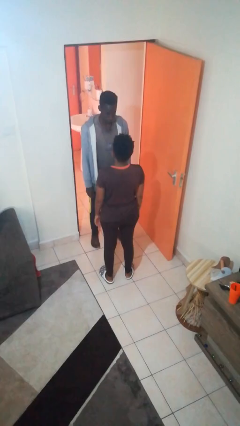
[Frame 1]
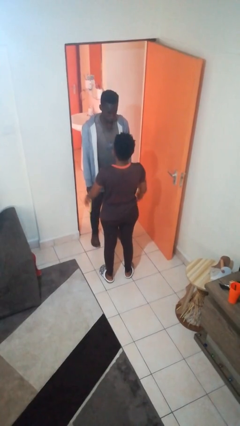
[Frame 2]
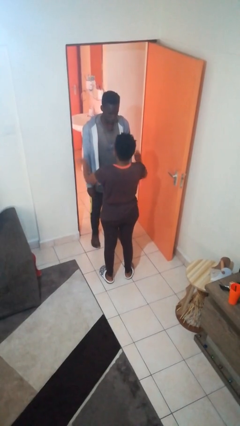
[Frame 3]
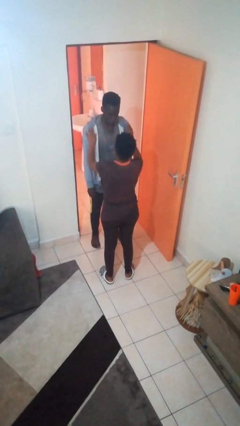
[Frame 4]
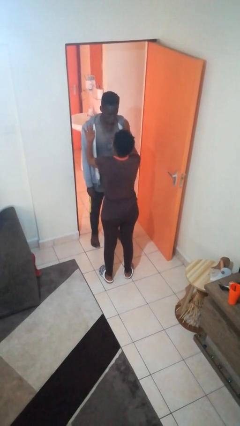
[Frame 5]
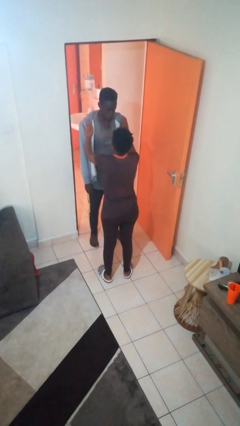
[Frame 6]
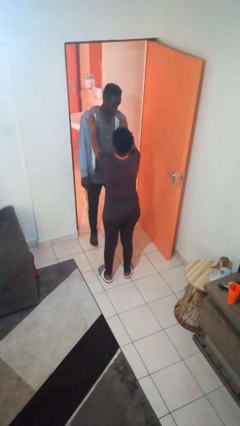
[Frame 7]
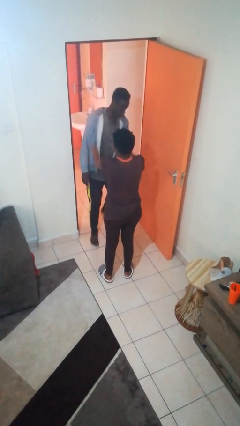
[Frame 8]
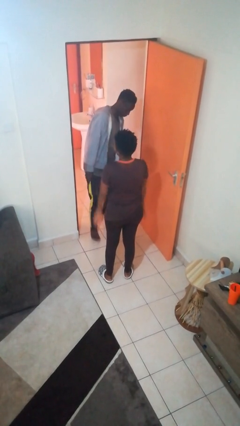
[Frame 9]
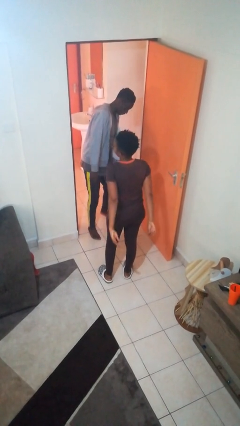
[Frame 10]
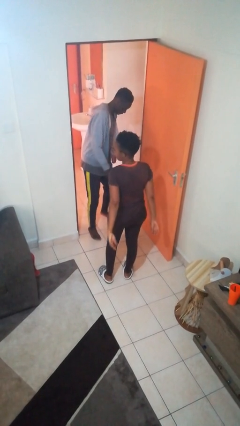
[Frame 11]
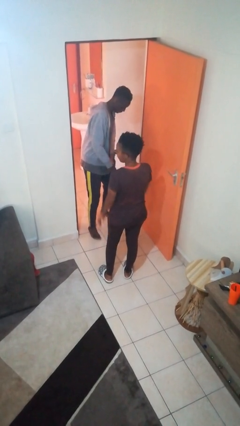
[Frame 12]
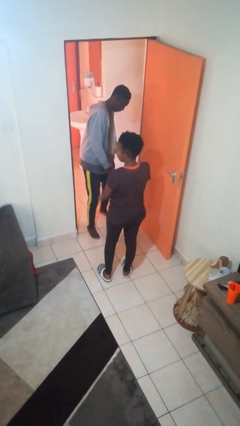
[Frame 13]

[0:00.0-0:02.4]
person shoves person

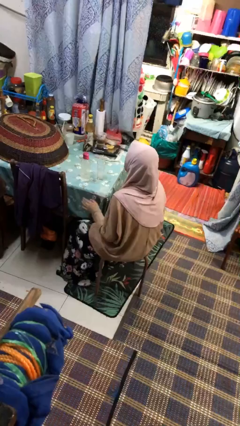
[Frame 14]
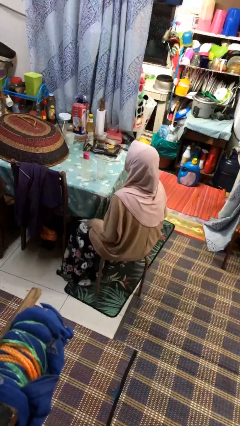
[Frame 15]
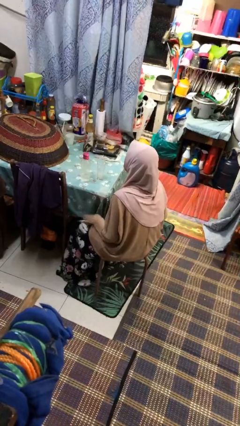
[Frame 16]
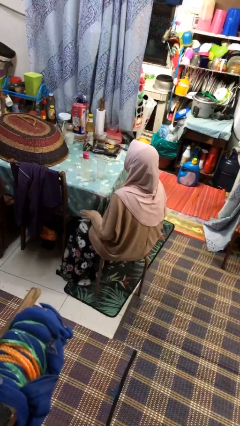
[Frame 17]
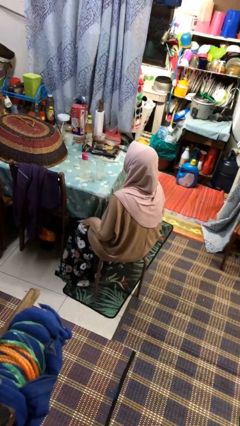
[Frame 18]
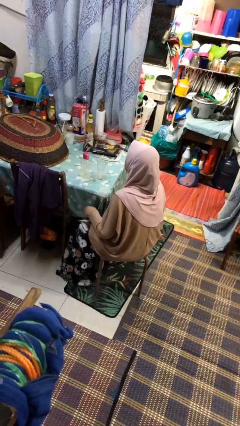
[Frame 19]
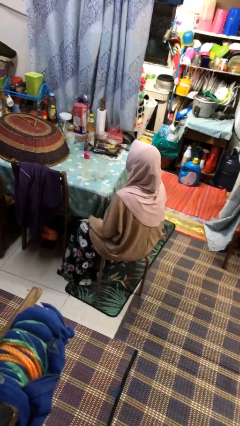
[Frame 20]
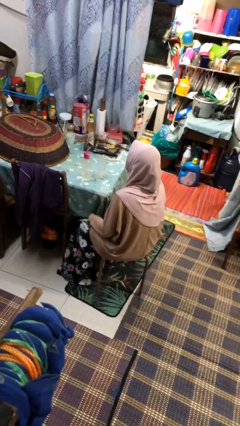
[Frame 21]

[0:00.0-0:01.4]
person slaps hands on thighs

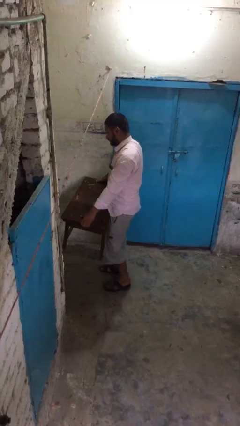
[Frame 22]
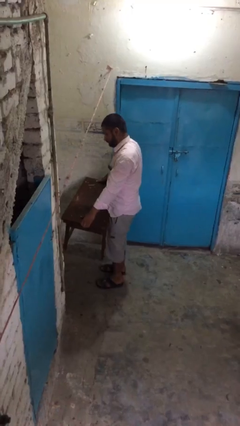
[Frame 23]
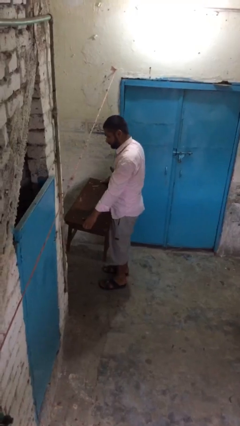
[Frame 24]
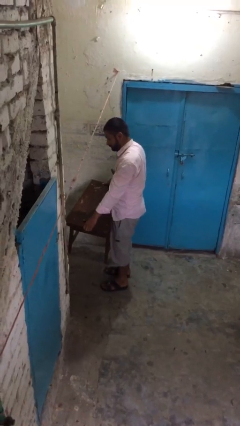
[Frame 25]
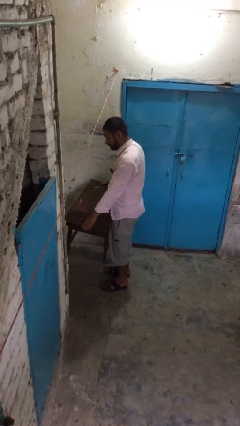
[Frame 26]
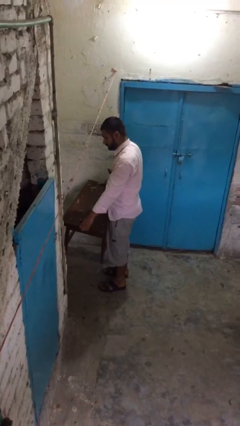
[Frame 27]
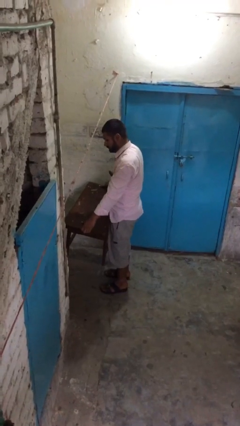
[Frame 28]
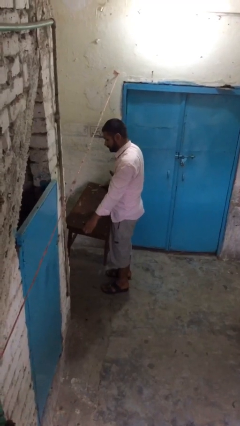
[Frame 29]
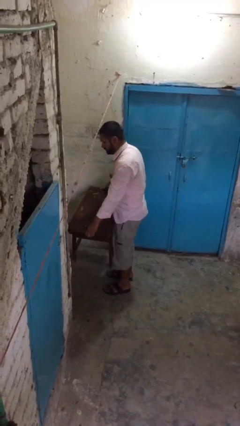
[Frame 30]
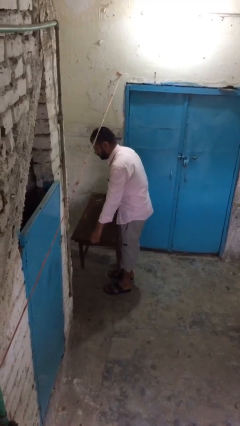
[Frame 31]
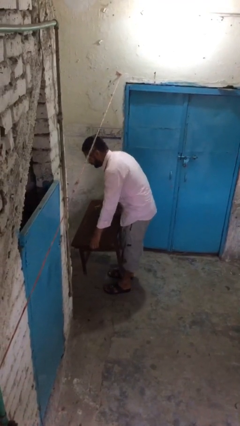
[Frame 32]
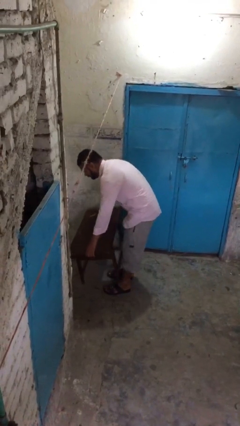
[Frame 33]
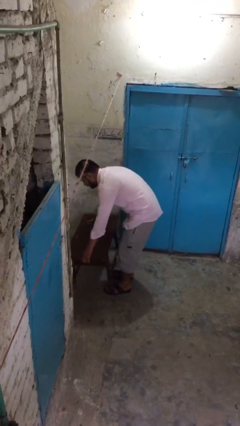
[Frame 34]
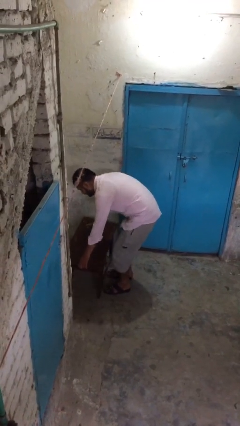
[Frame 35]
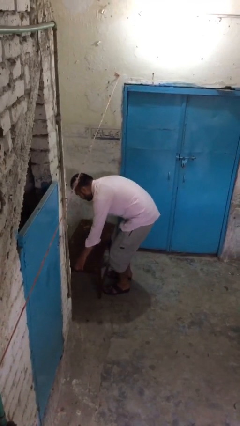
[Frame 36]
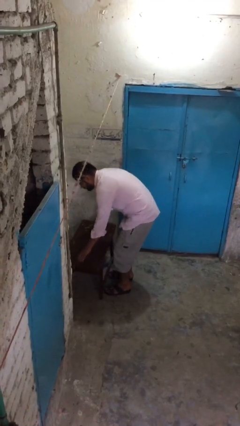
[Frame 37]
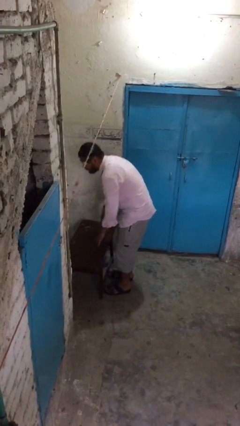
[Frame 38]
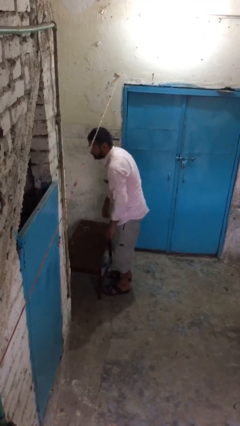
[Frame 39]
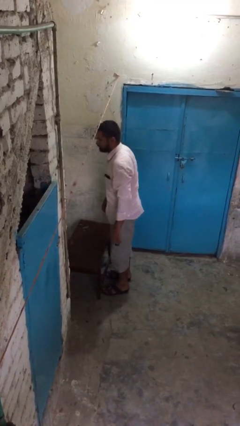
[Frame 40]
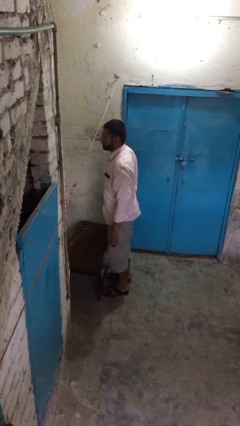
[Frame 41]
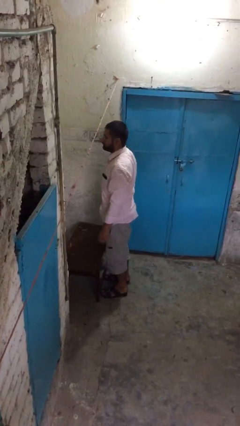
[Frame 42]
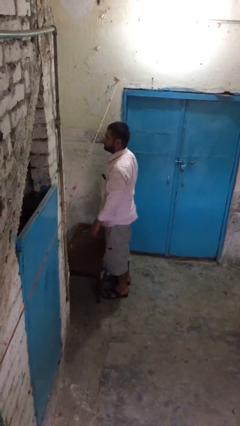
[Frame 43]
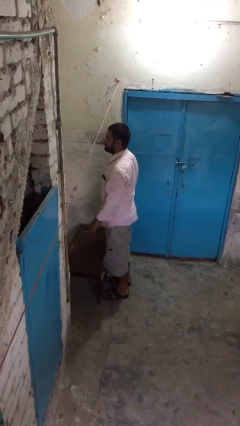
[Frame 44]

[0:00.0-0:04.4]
person puts down object on floor

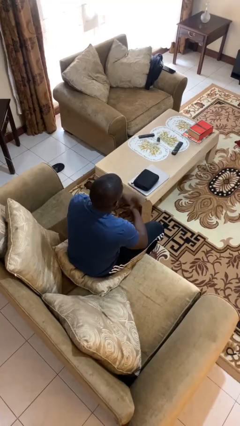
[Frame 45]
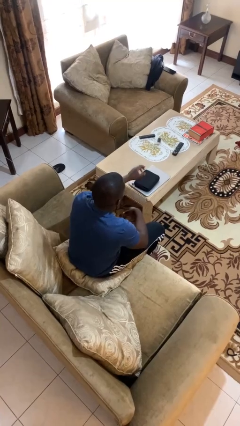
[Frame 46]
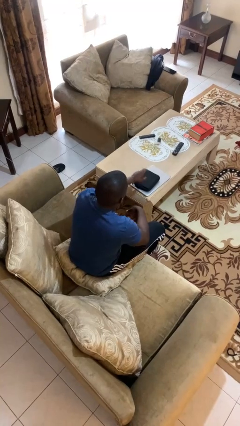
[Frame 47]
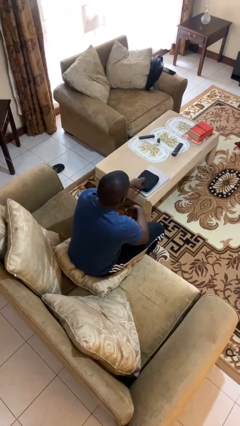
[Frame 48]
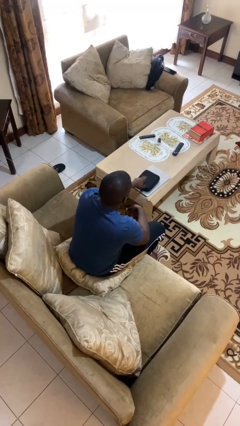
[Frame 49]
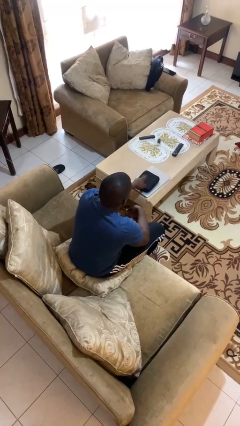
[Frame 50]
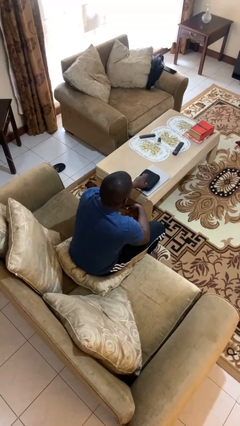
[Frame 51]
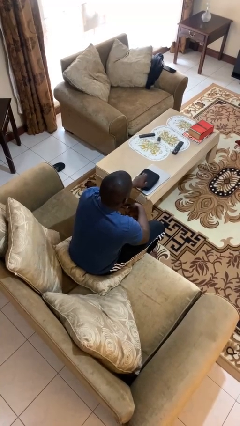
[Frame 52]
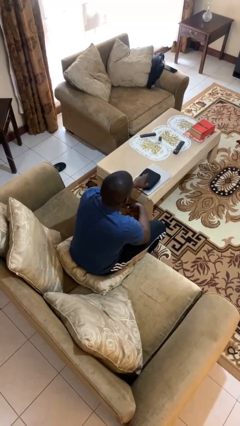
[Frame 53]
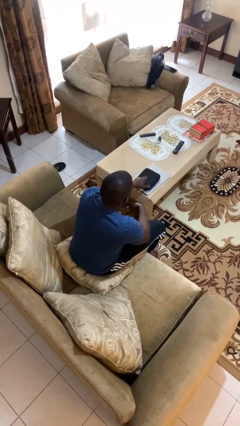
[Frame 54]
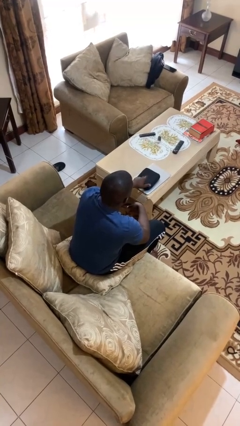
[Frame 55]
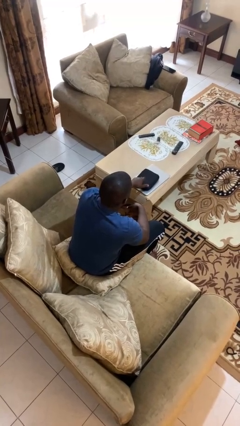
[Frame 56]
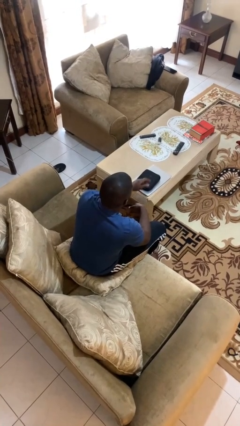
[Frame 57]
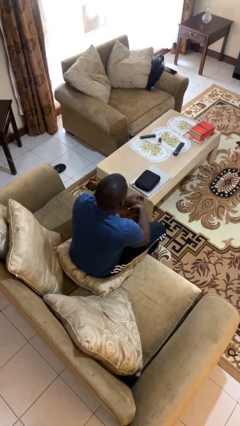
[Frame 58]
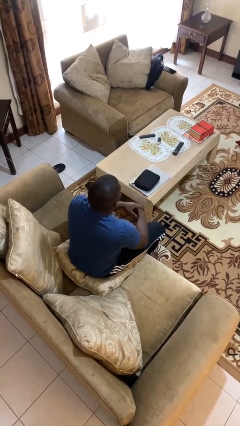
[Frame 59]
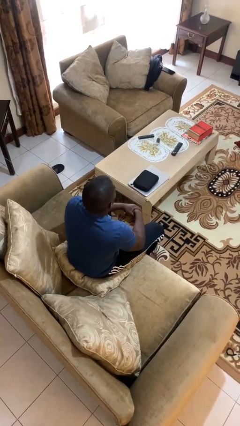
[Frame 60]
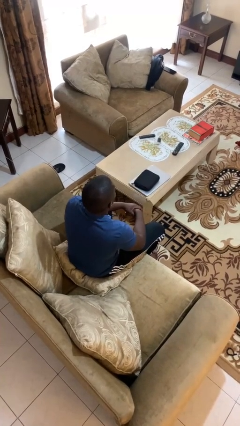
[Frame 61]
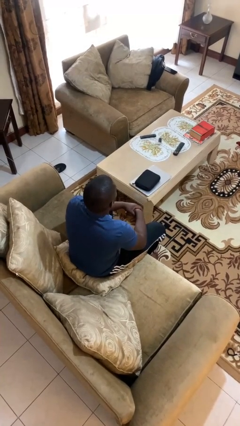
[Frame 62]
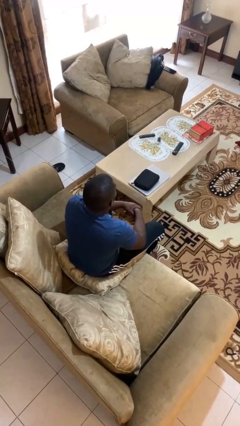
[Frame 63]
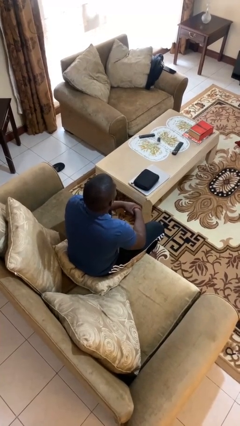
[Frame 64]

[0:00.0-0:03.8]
person taps object with finger

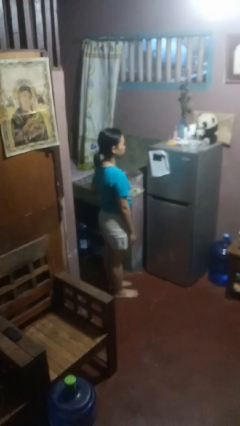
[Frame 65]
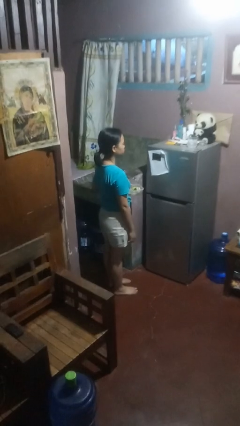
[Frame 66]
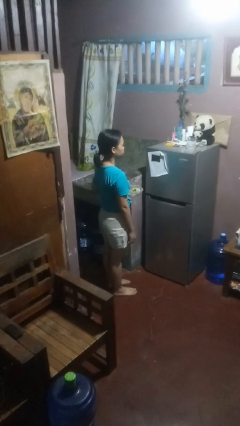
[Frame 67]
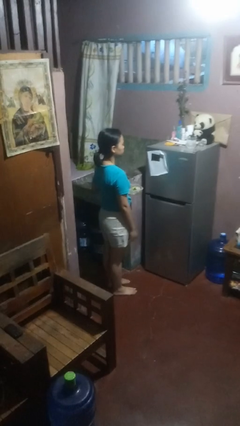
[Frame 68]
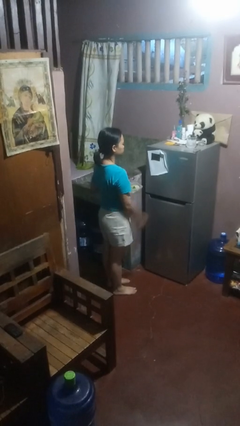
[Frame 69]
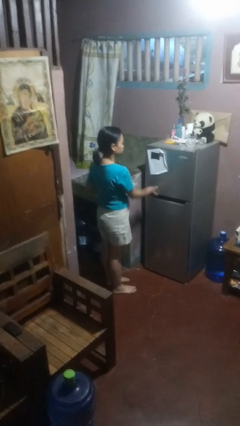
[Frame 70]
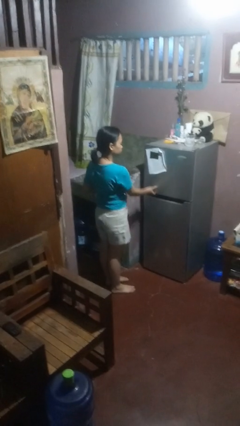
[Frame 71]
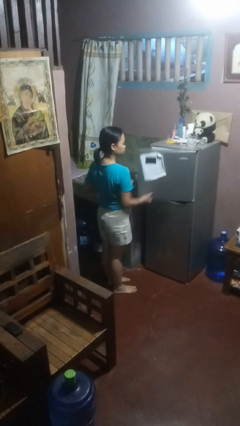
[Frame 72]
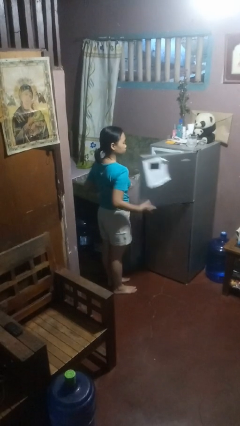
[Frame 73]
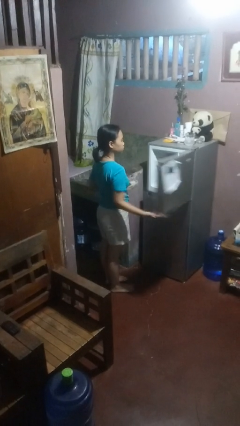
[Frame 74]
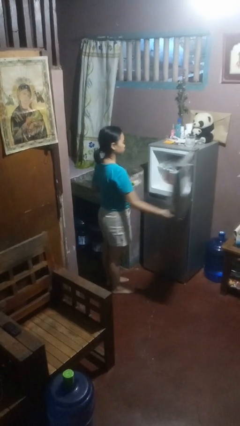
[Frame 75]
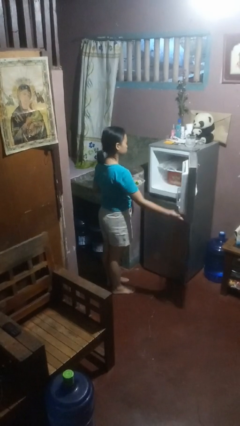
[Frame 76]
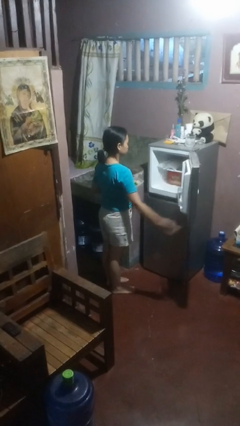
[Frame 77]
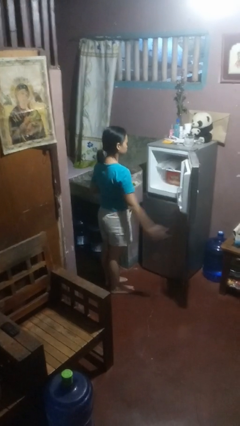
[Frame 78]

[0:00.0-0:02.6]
person opens refrigerator

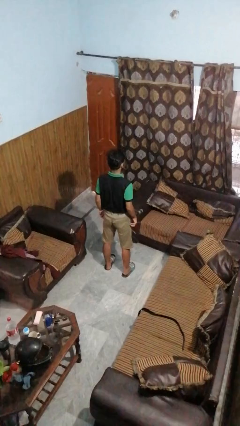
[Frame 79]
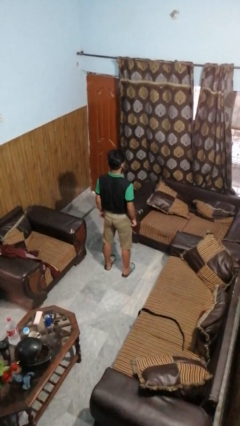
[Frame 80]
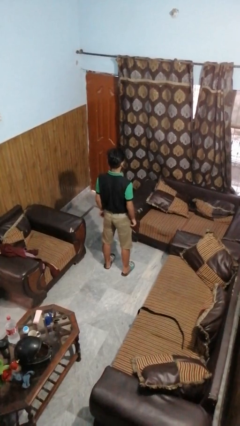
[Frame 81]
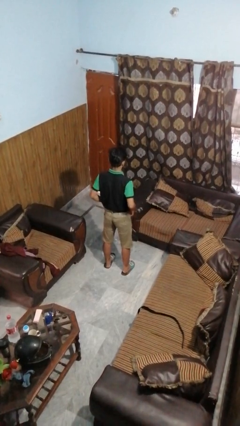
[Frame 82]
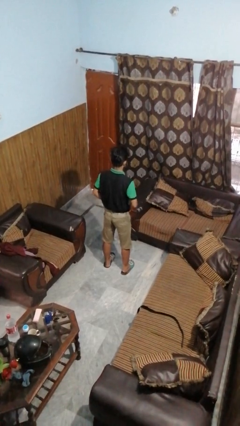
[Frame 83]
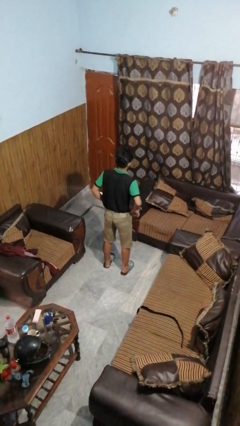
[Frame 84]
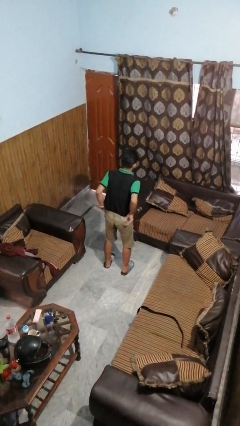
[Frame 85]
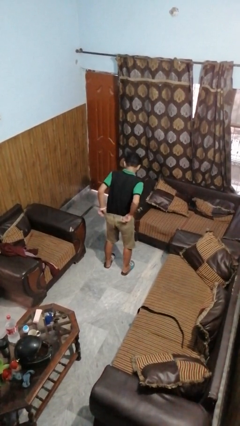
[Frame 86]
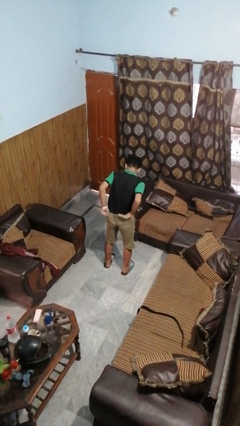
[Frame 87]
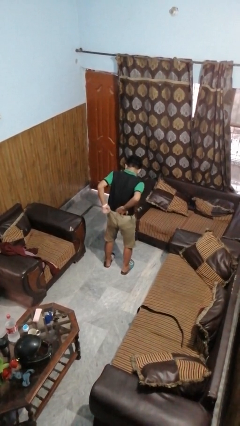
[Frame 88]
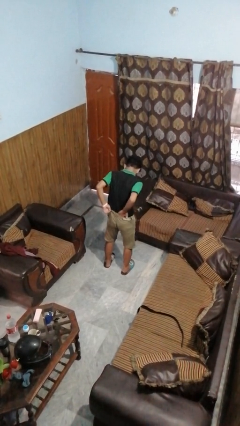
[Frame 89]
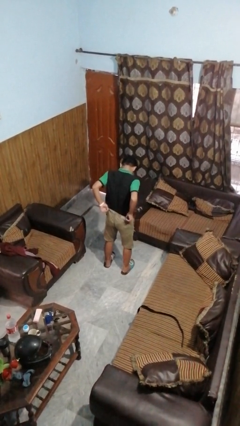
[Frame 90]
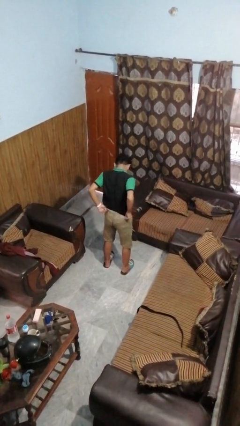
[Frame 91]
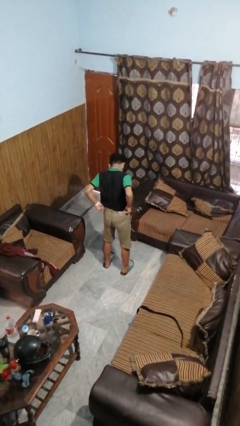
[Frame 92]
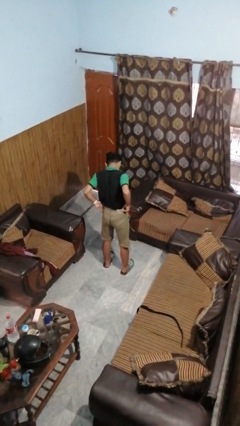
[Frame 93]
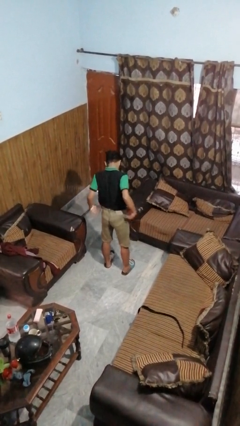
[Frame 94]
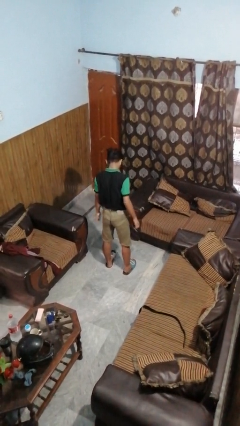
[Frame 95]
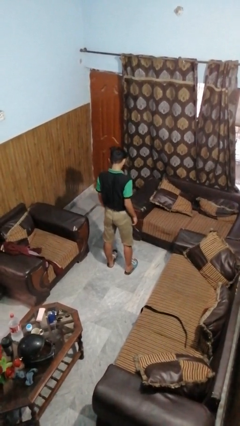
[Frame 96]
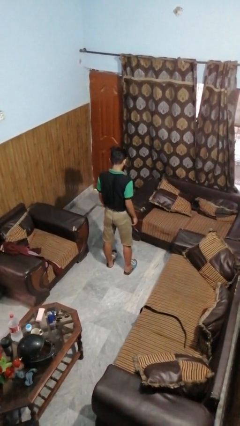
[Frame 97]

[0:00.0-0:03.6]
person hikes up pants
